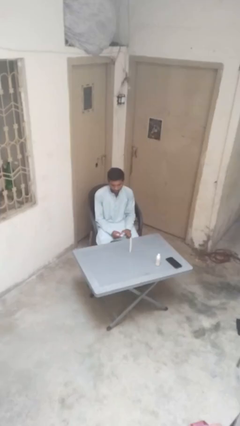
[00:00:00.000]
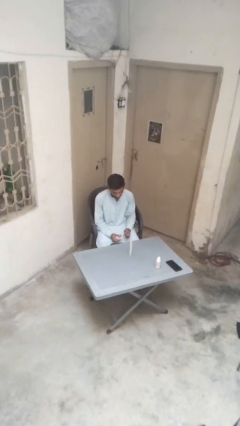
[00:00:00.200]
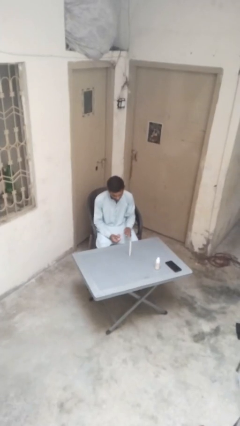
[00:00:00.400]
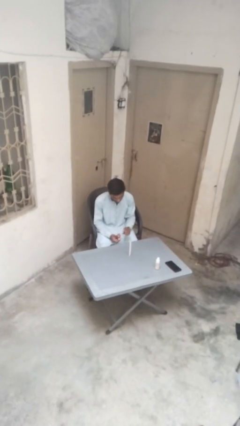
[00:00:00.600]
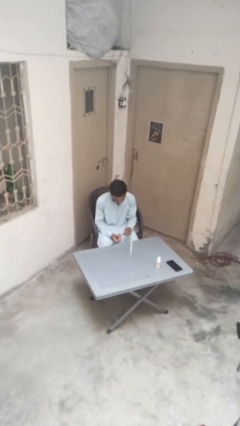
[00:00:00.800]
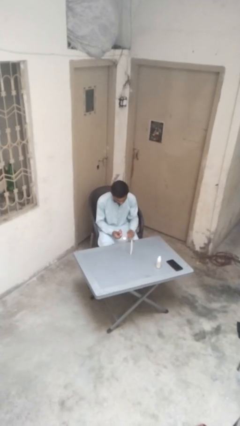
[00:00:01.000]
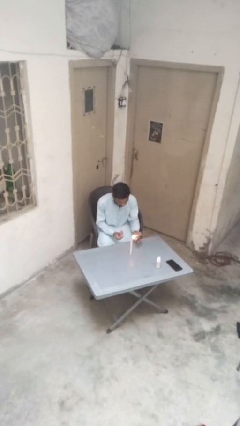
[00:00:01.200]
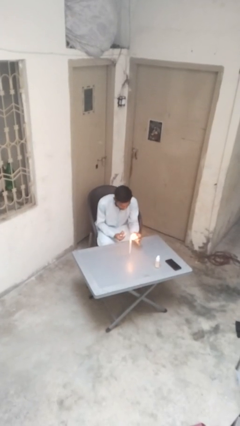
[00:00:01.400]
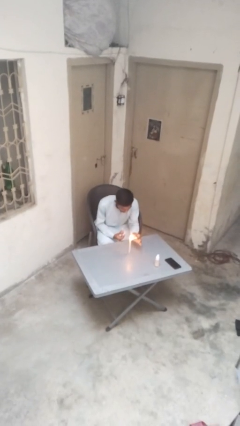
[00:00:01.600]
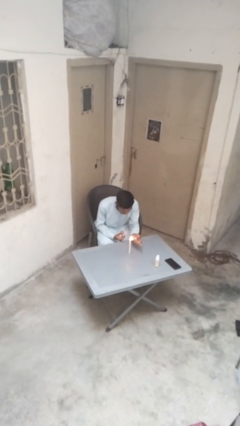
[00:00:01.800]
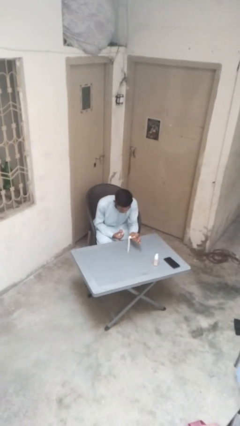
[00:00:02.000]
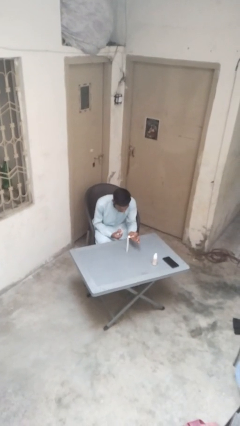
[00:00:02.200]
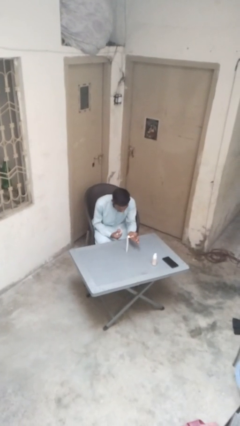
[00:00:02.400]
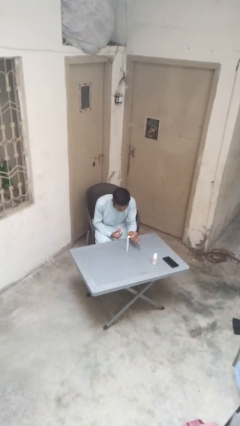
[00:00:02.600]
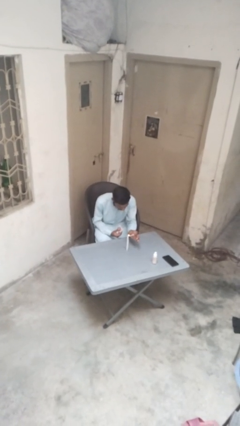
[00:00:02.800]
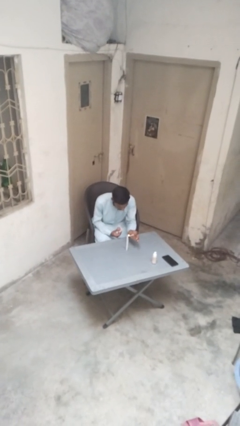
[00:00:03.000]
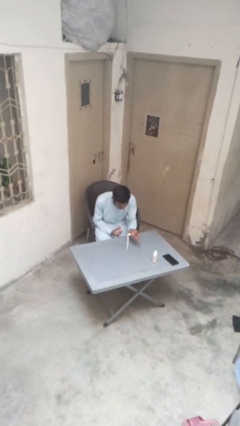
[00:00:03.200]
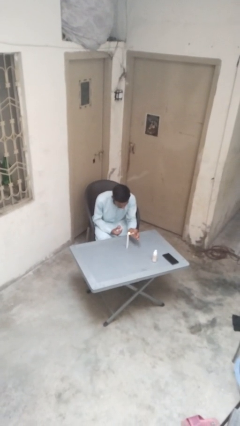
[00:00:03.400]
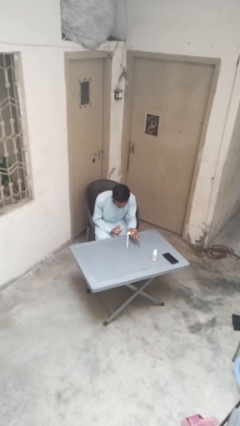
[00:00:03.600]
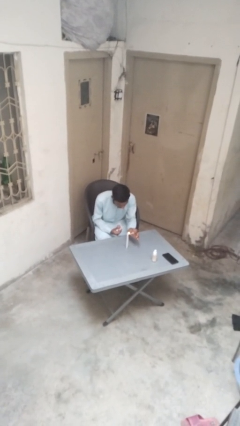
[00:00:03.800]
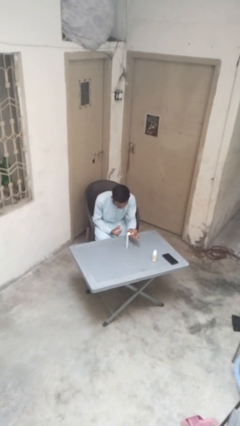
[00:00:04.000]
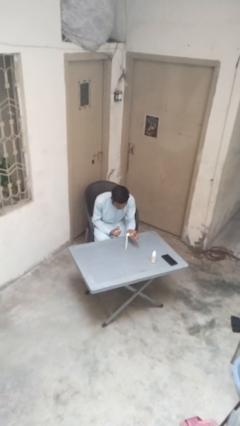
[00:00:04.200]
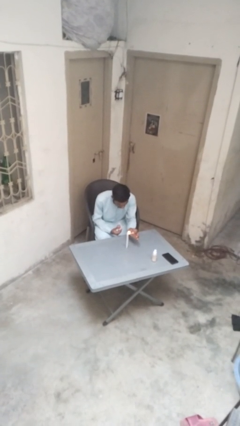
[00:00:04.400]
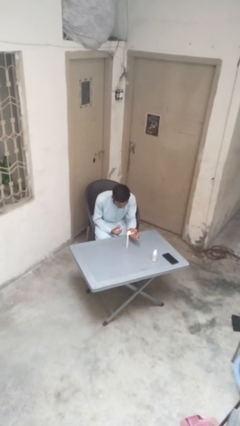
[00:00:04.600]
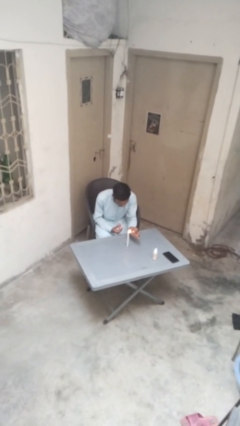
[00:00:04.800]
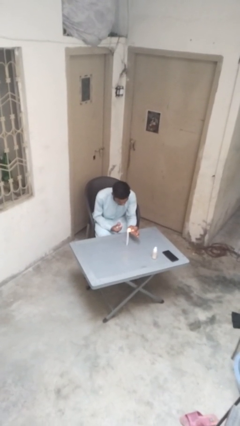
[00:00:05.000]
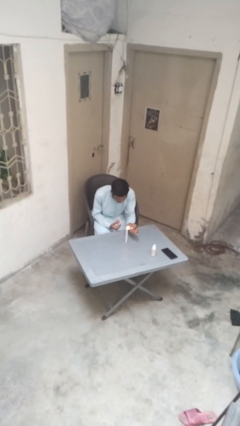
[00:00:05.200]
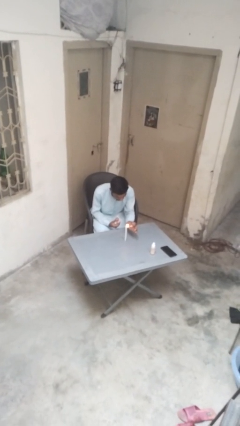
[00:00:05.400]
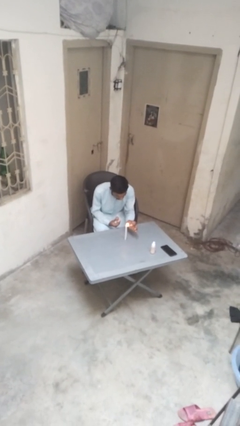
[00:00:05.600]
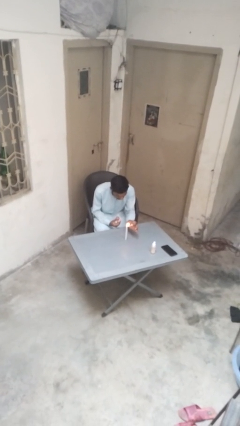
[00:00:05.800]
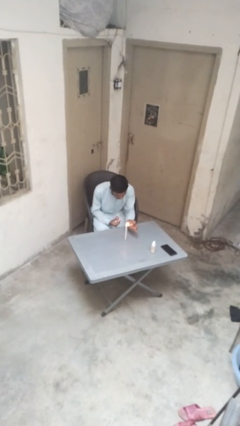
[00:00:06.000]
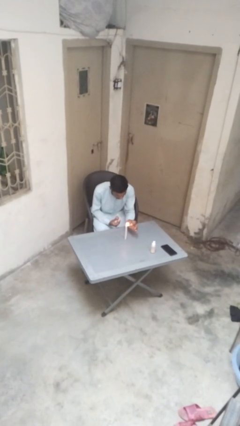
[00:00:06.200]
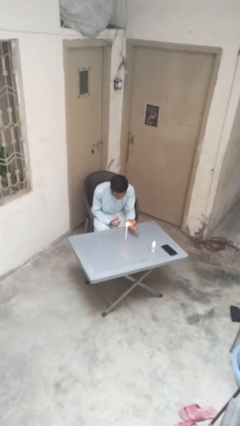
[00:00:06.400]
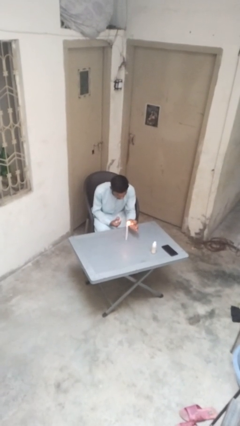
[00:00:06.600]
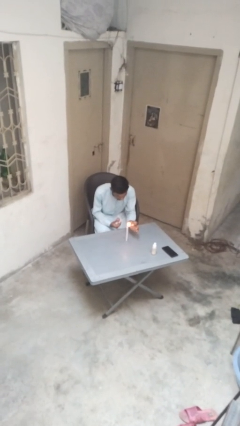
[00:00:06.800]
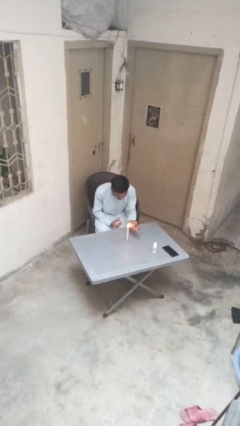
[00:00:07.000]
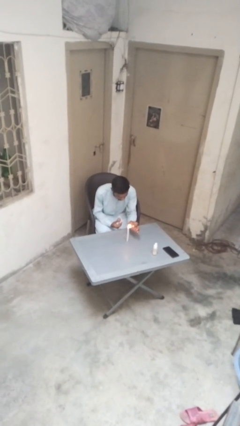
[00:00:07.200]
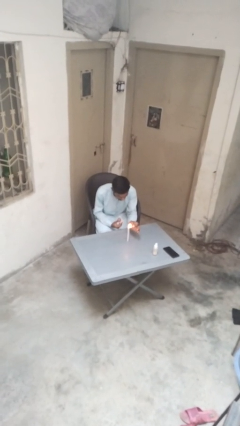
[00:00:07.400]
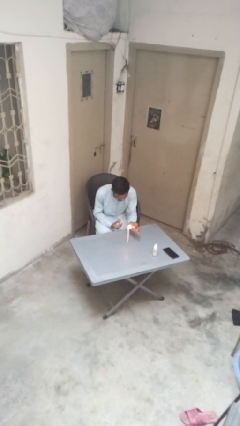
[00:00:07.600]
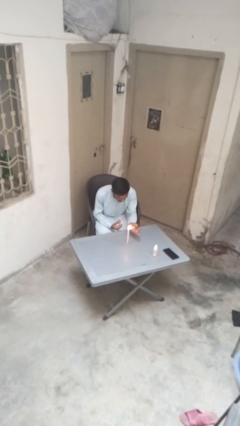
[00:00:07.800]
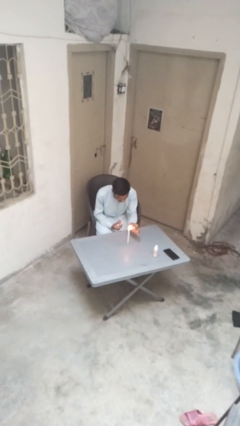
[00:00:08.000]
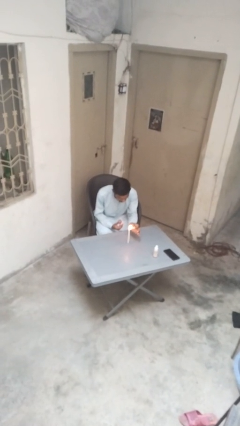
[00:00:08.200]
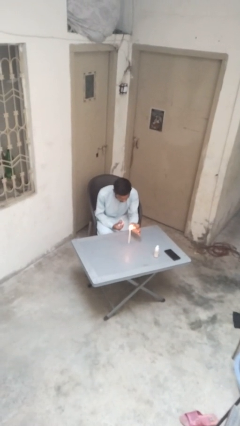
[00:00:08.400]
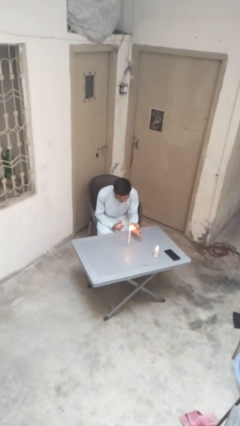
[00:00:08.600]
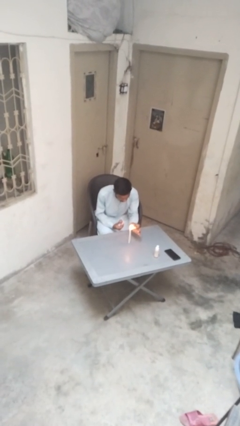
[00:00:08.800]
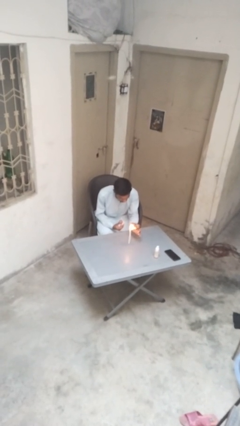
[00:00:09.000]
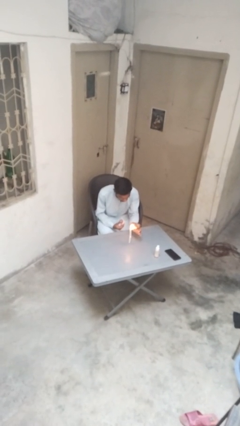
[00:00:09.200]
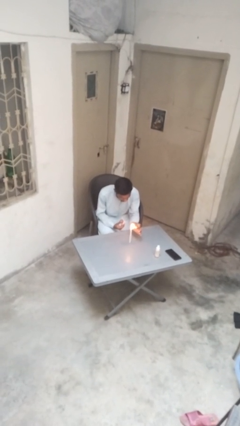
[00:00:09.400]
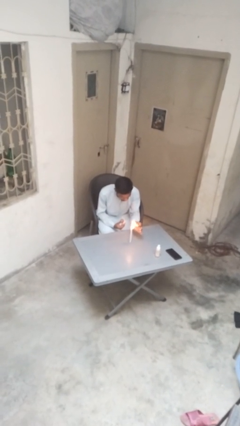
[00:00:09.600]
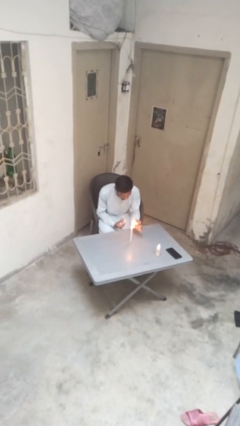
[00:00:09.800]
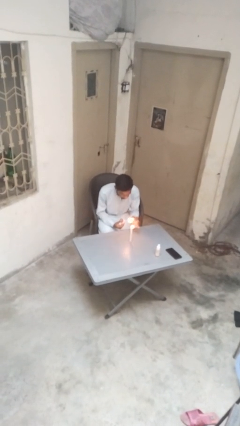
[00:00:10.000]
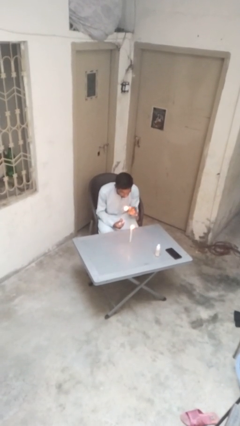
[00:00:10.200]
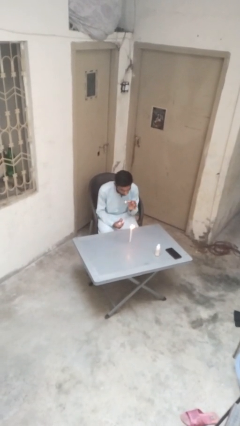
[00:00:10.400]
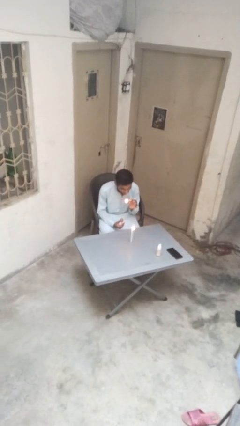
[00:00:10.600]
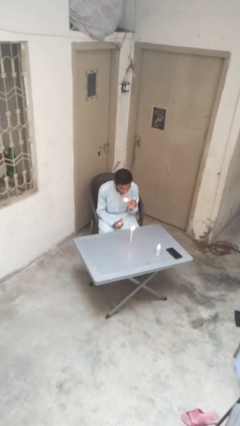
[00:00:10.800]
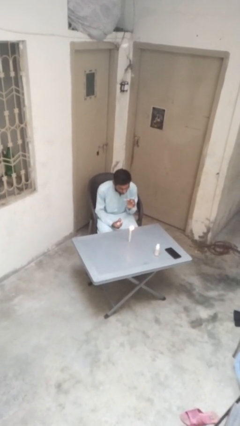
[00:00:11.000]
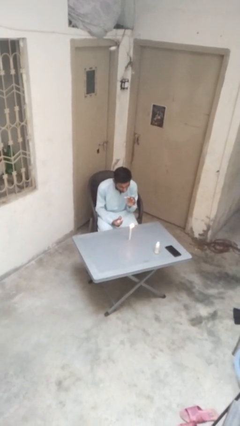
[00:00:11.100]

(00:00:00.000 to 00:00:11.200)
person lights candle

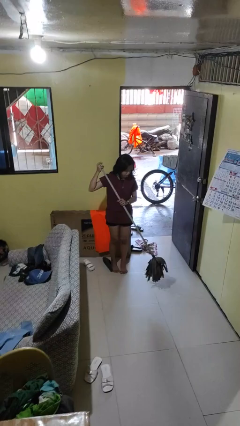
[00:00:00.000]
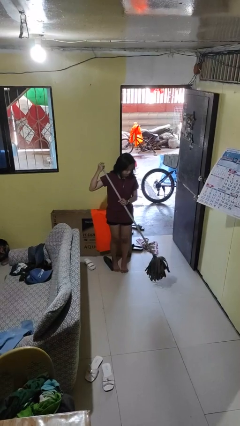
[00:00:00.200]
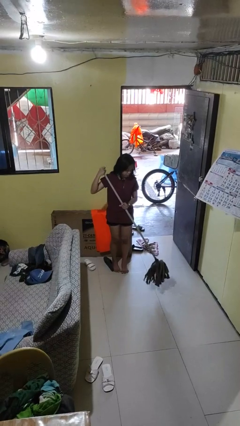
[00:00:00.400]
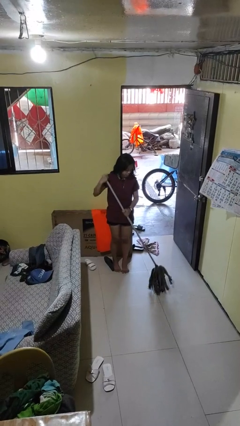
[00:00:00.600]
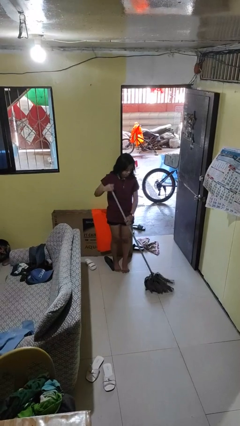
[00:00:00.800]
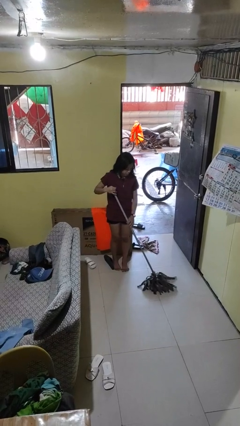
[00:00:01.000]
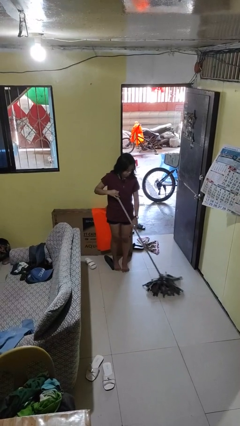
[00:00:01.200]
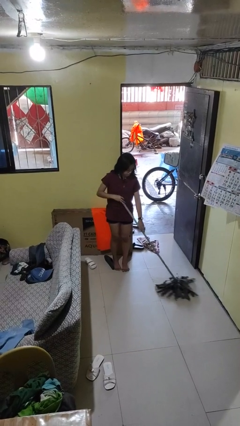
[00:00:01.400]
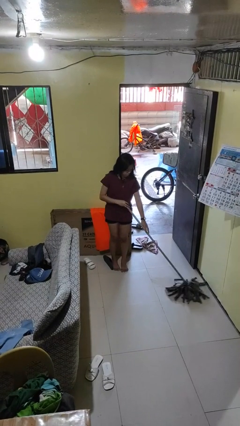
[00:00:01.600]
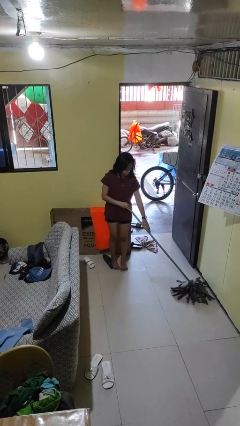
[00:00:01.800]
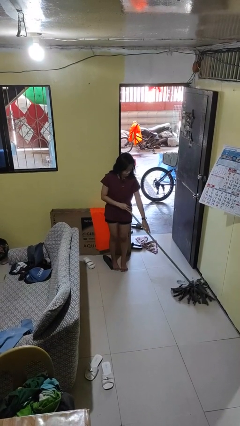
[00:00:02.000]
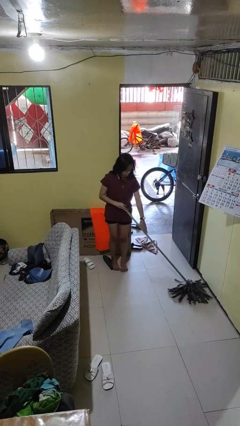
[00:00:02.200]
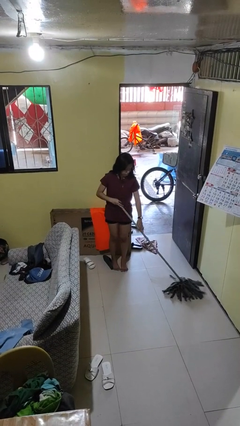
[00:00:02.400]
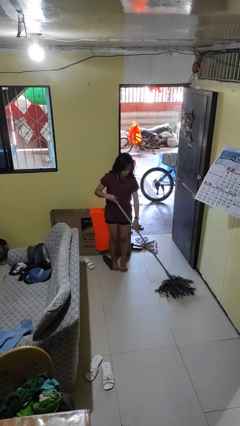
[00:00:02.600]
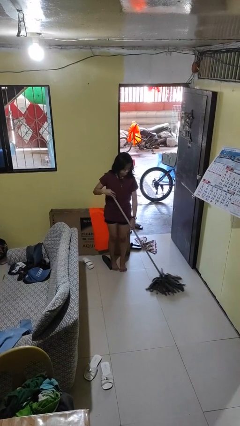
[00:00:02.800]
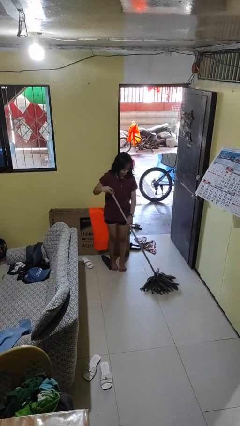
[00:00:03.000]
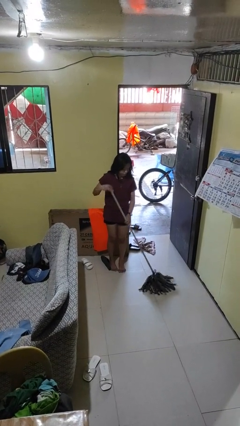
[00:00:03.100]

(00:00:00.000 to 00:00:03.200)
person mops

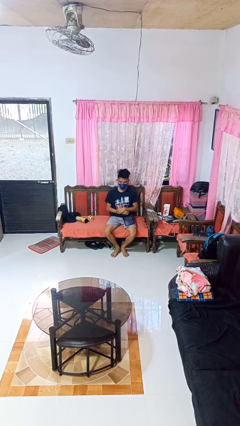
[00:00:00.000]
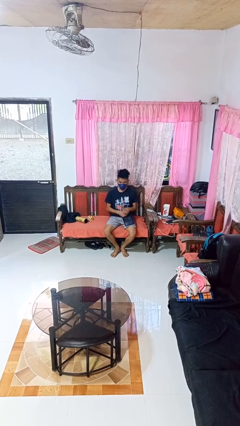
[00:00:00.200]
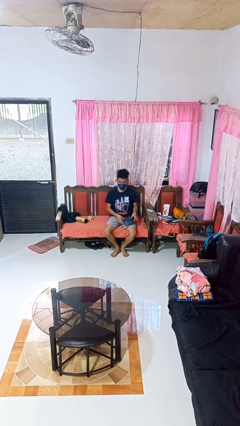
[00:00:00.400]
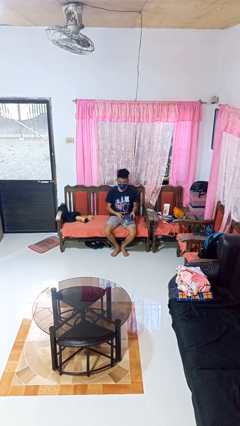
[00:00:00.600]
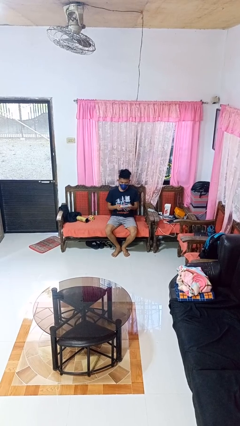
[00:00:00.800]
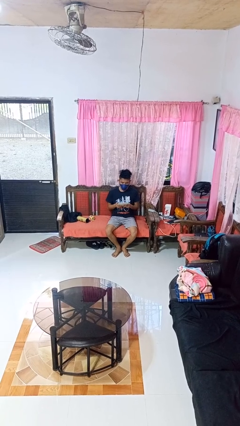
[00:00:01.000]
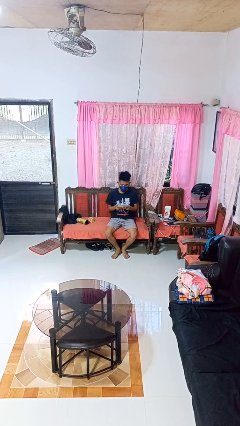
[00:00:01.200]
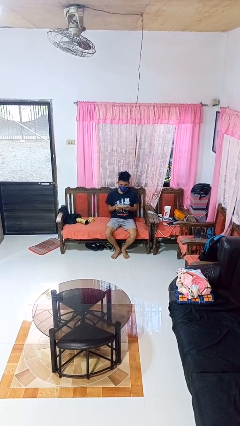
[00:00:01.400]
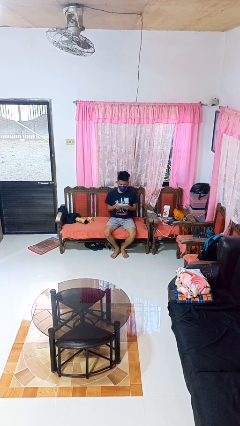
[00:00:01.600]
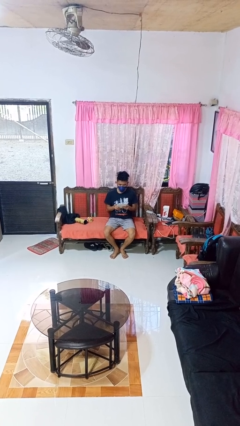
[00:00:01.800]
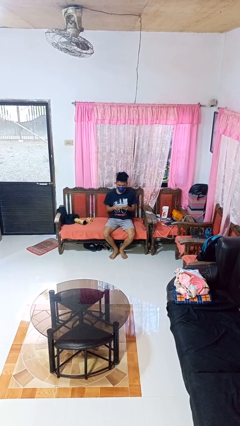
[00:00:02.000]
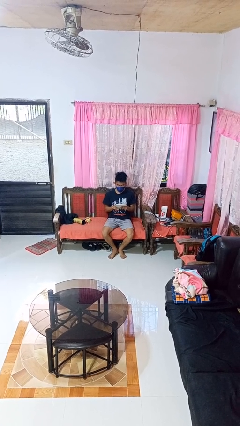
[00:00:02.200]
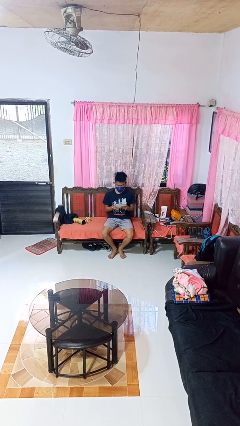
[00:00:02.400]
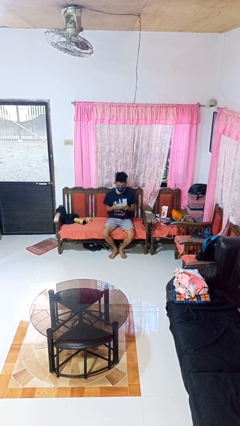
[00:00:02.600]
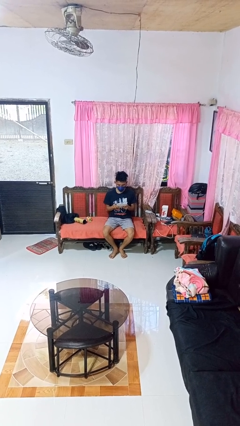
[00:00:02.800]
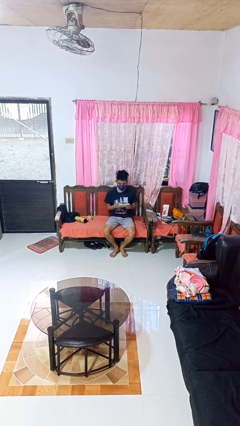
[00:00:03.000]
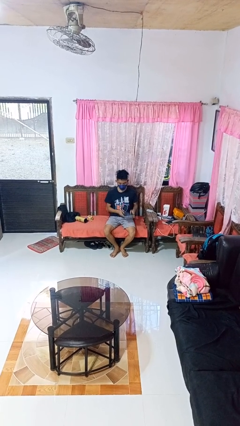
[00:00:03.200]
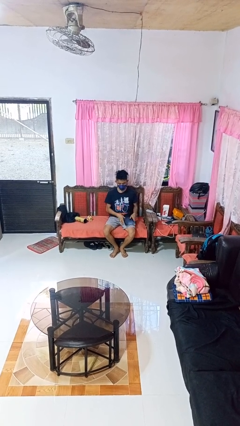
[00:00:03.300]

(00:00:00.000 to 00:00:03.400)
person interacts with tablet
